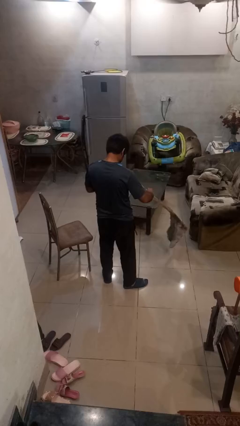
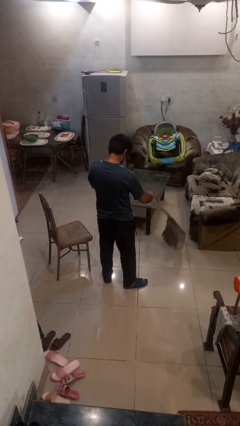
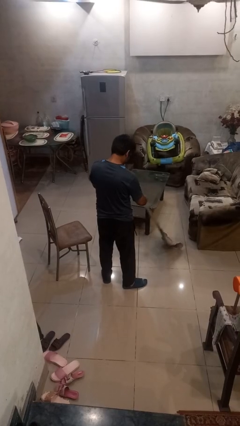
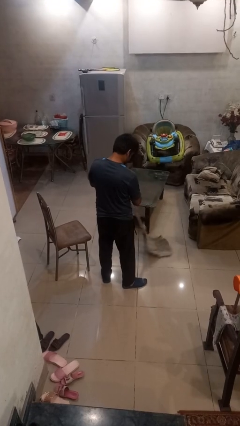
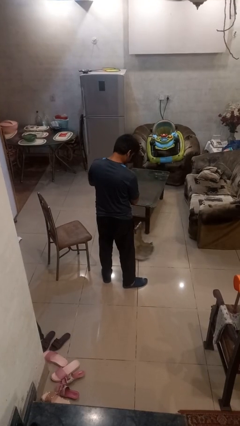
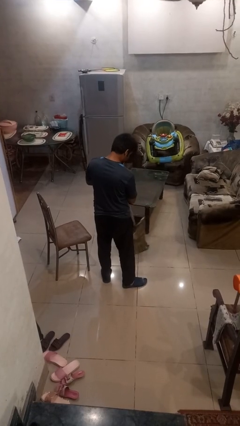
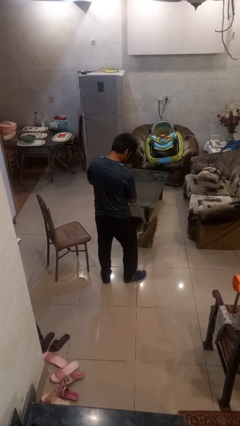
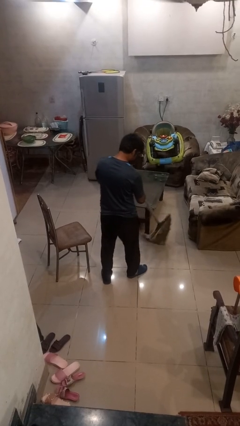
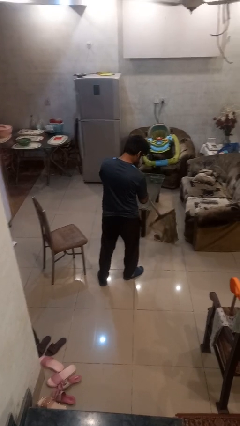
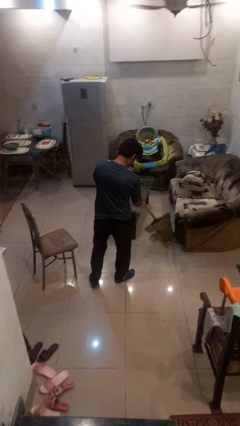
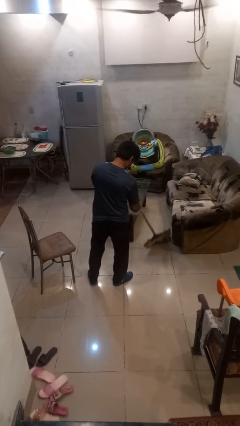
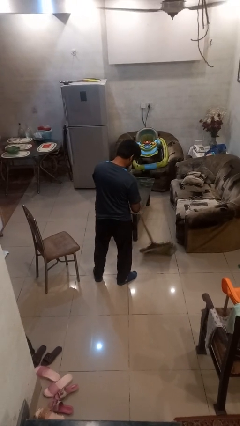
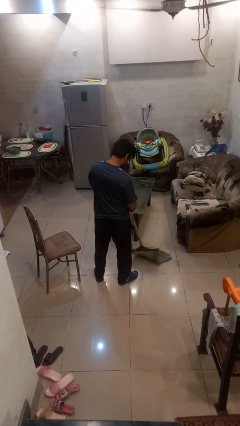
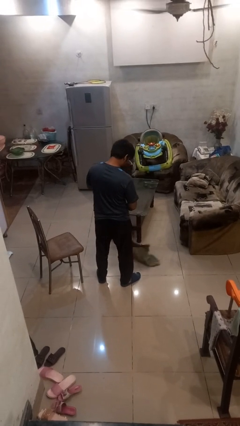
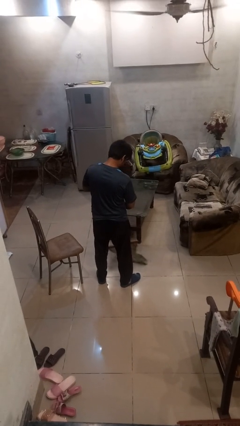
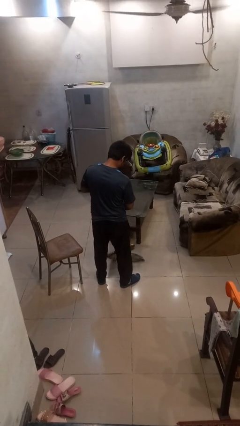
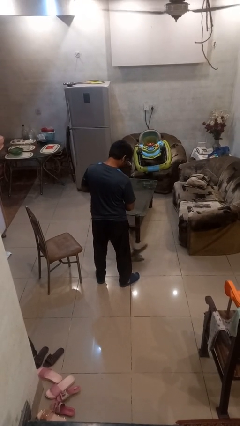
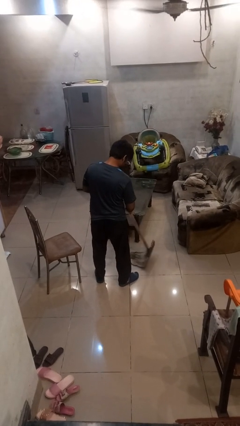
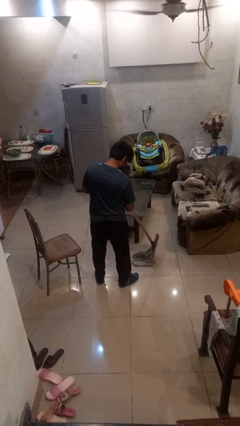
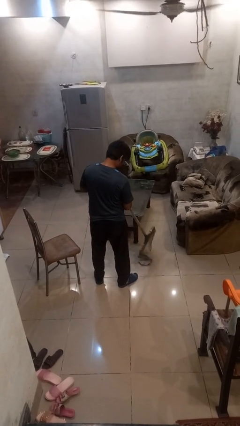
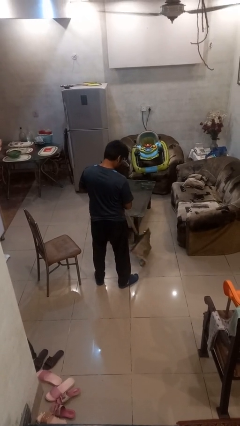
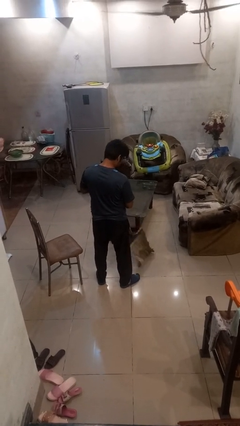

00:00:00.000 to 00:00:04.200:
person mops

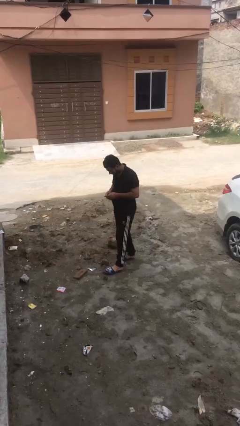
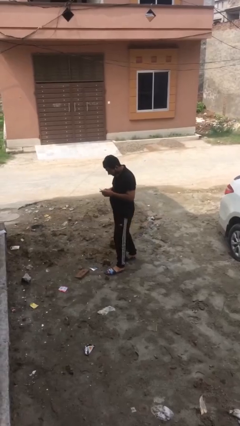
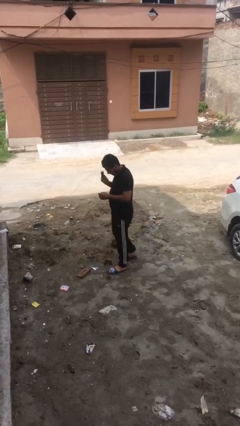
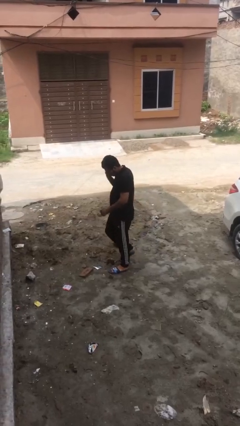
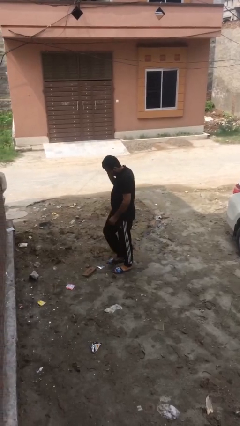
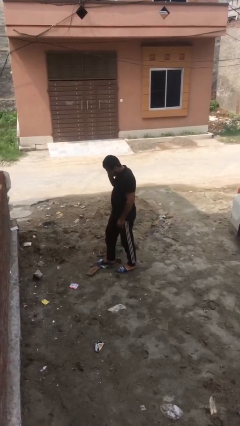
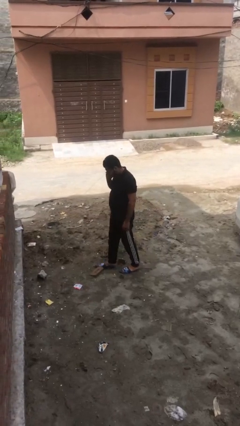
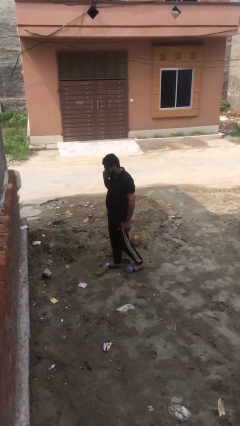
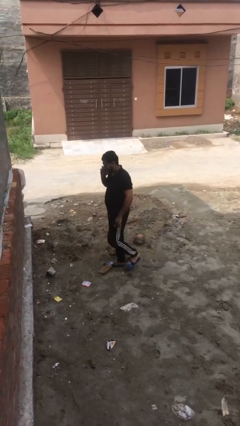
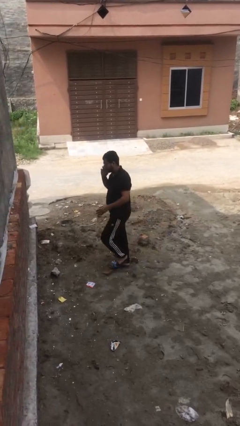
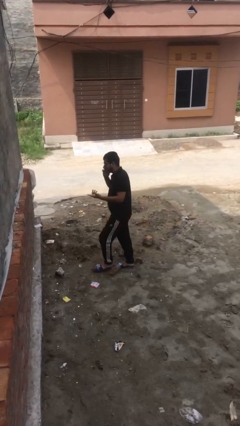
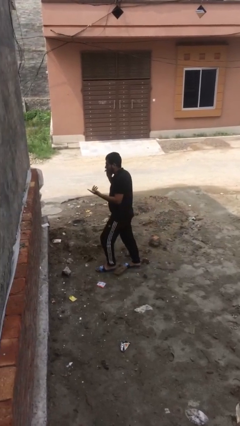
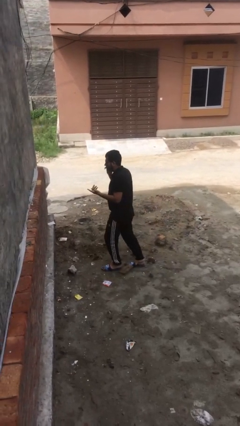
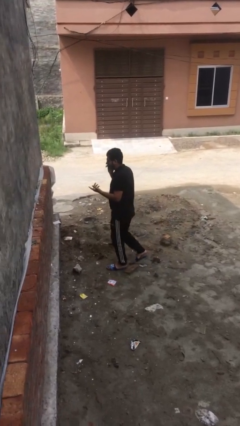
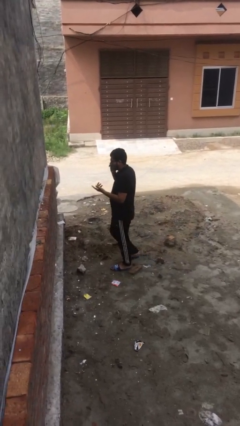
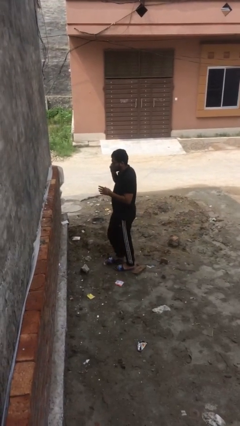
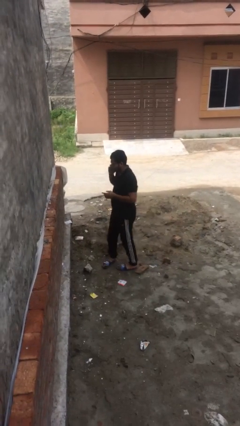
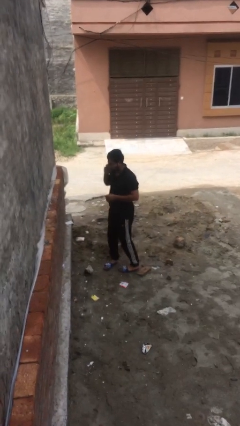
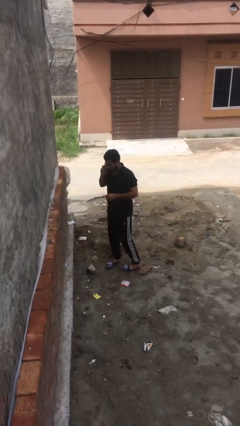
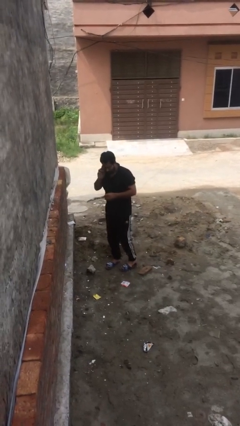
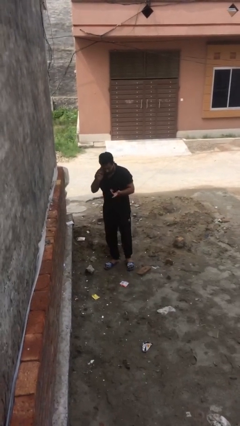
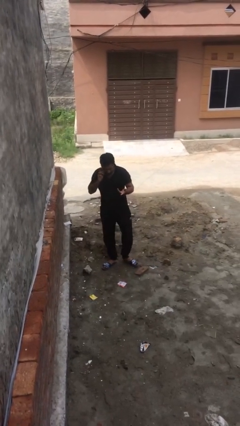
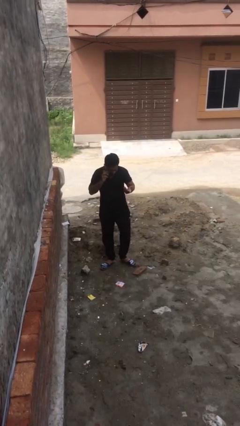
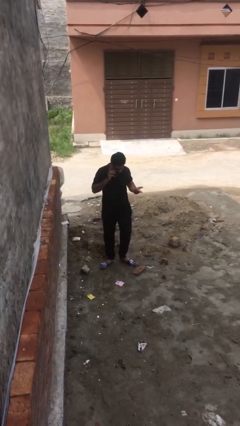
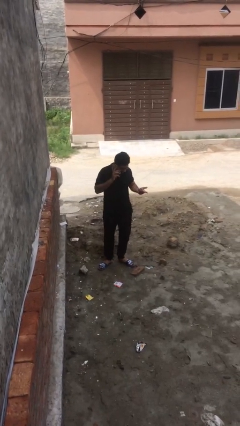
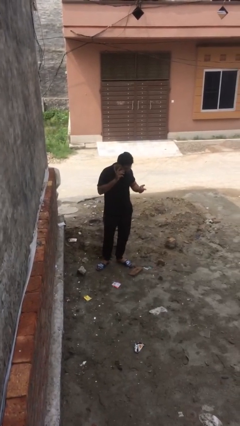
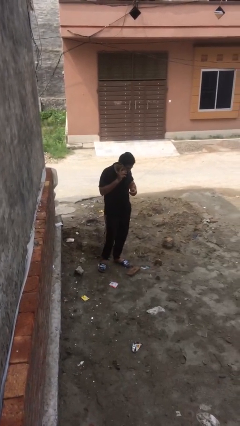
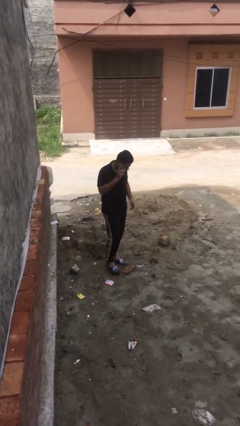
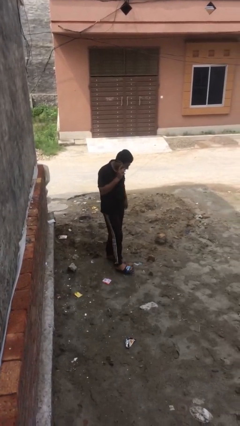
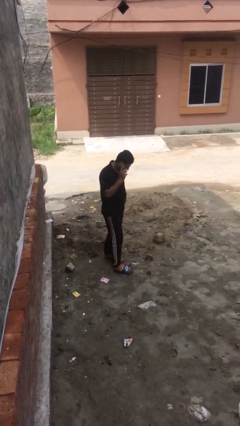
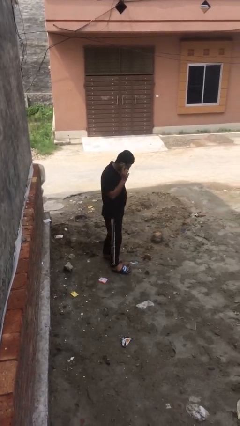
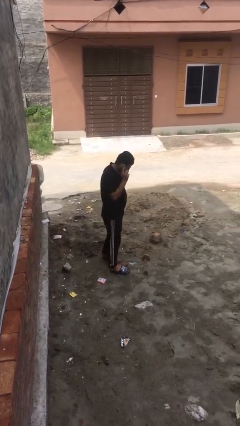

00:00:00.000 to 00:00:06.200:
person talks on phone

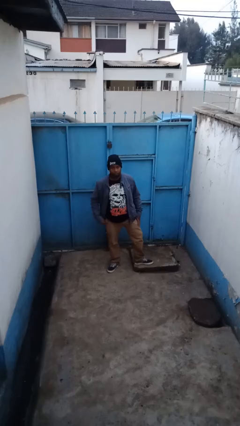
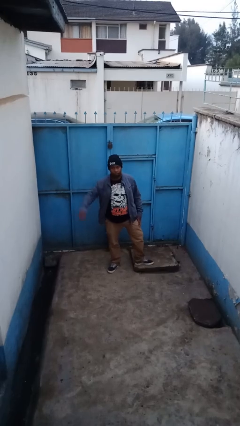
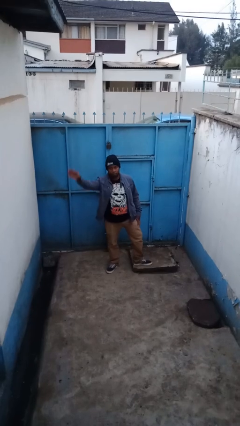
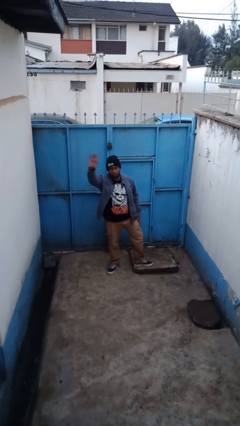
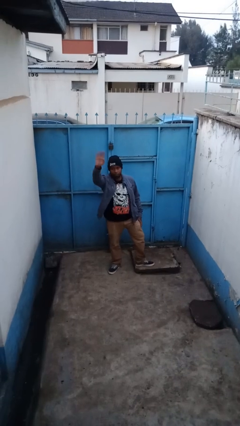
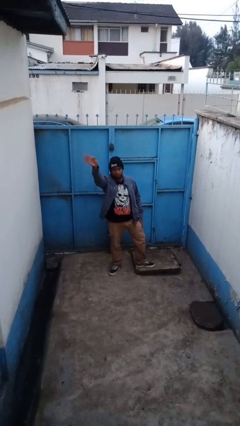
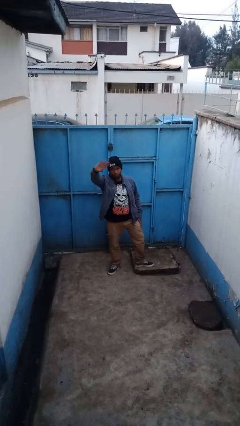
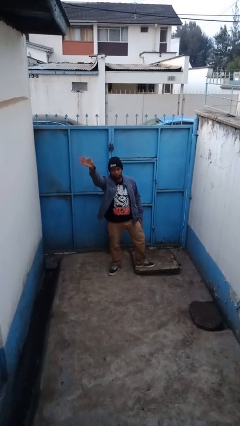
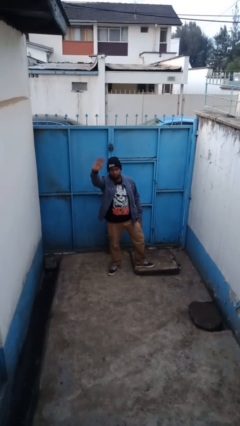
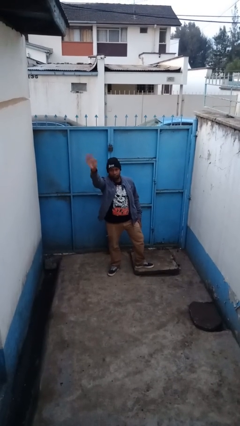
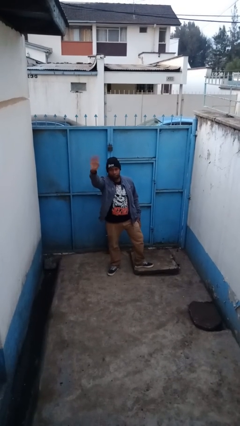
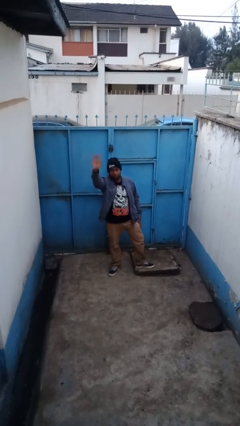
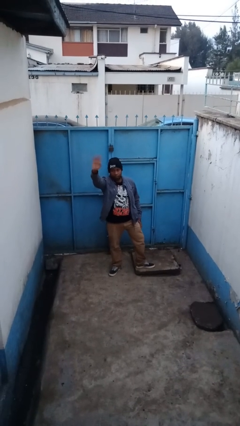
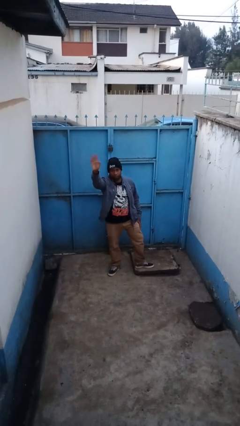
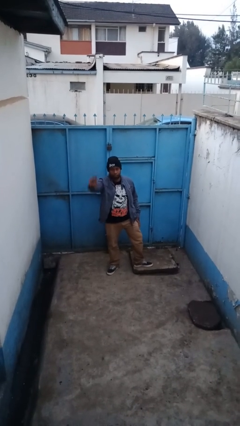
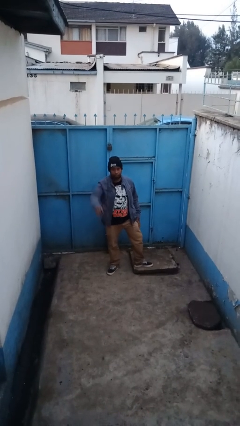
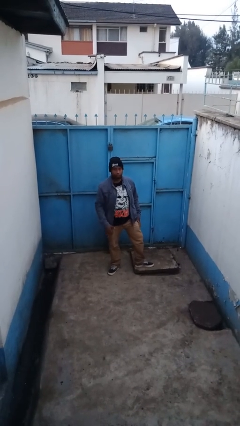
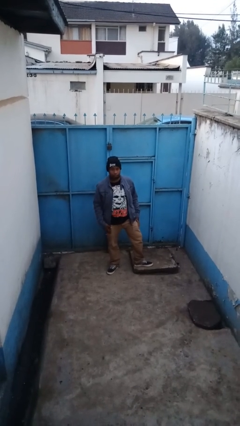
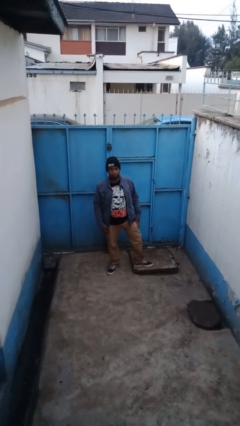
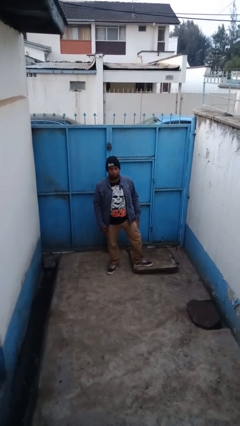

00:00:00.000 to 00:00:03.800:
person waves at person

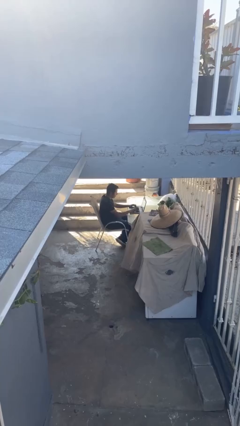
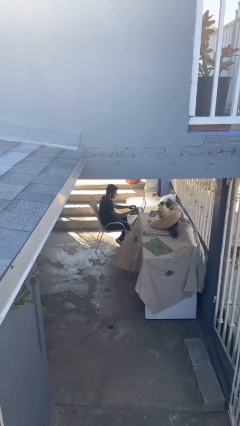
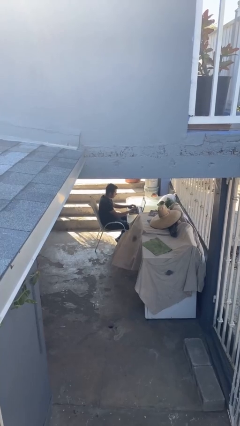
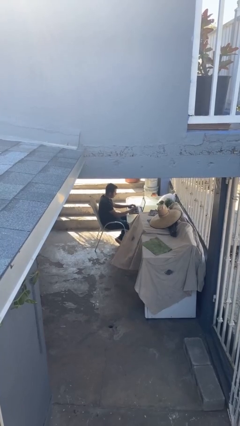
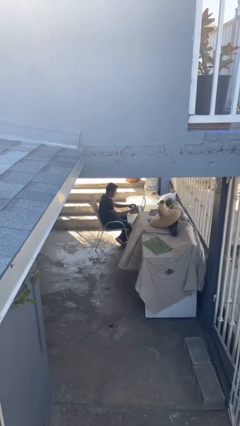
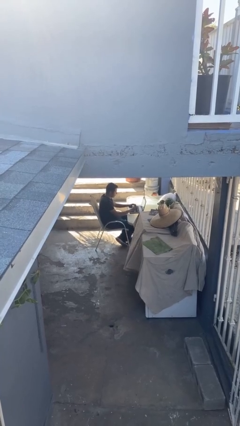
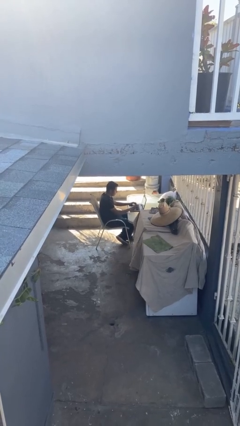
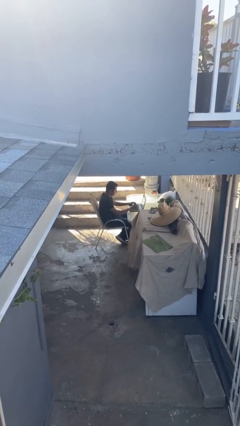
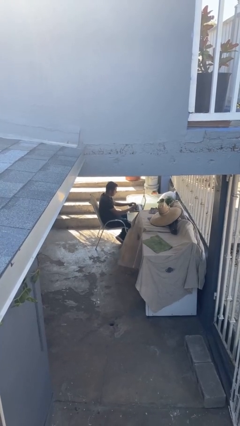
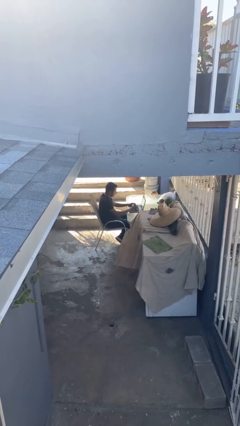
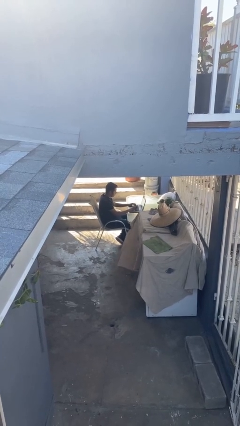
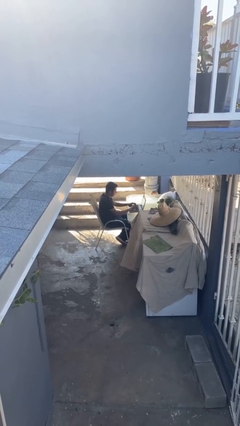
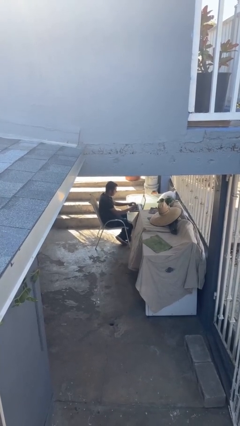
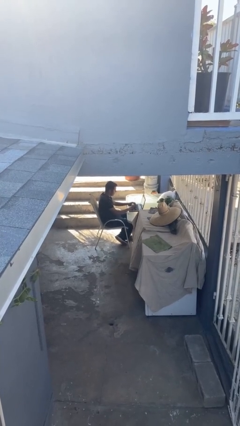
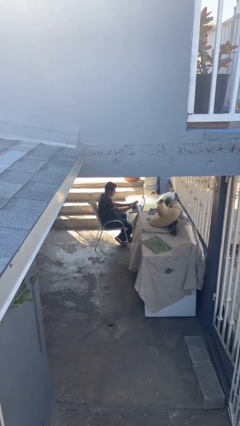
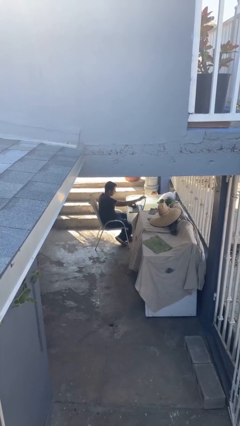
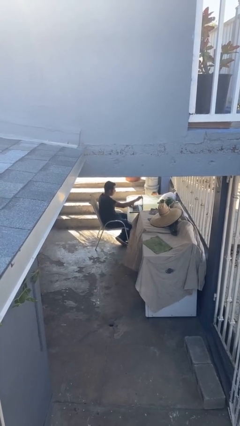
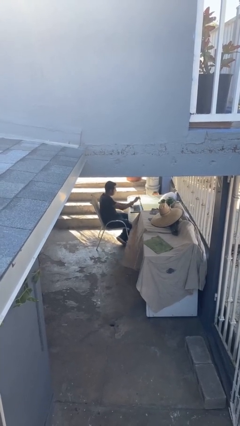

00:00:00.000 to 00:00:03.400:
person interacts with laptop
